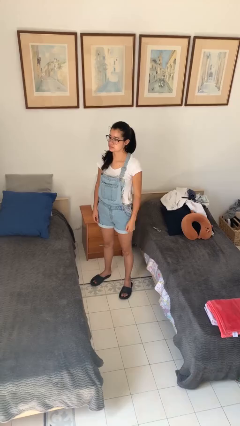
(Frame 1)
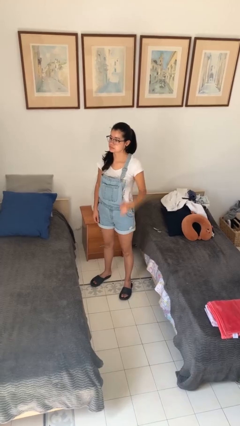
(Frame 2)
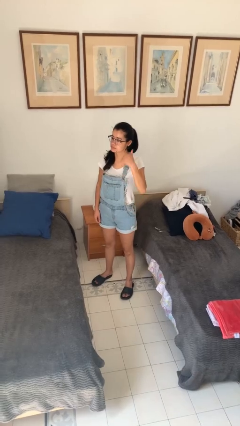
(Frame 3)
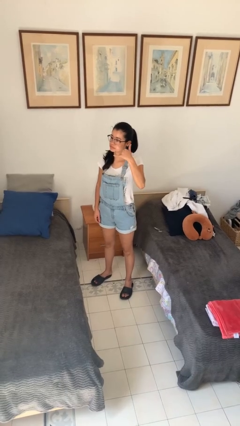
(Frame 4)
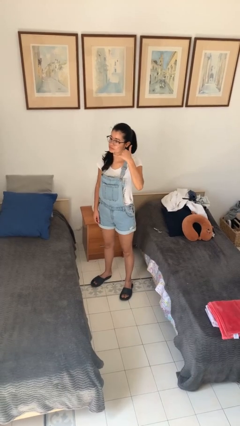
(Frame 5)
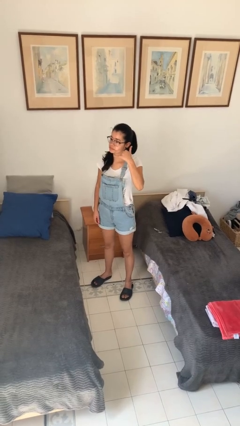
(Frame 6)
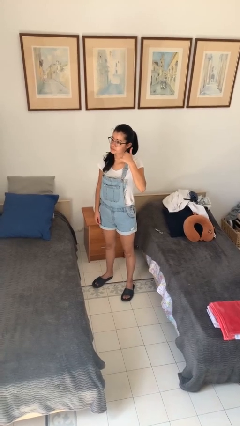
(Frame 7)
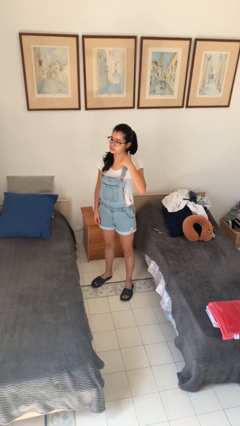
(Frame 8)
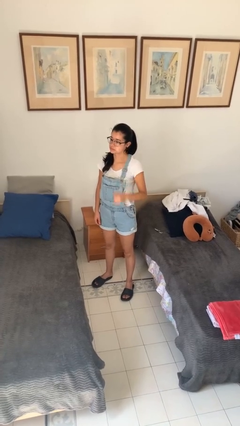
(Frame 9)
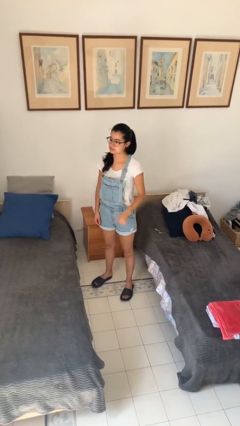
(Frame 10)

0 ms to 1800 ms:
person gestures call me

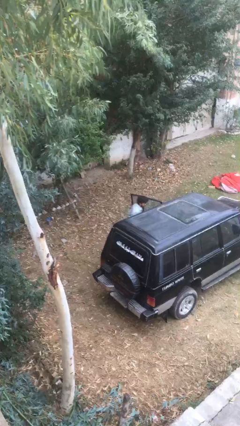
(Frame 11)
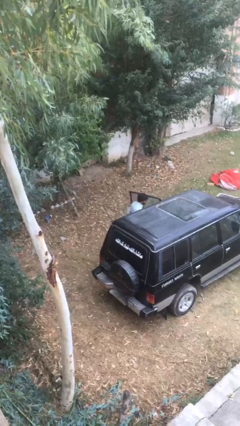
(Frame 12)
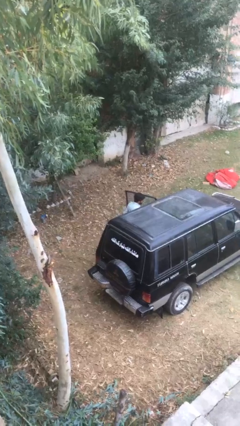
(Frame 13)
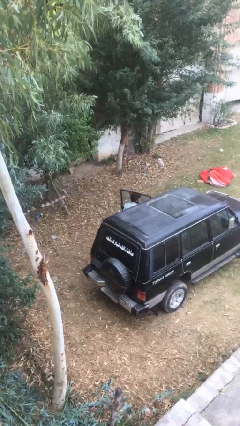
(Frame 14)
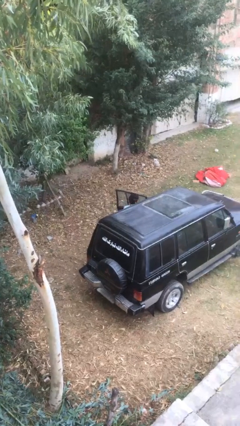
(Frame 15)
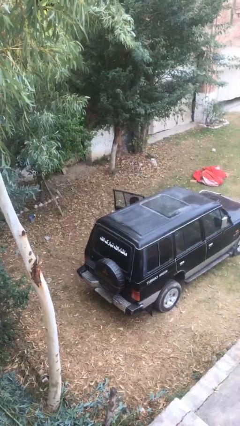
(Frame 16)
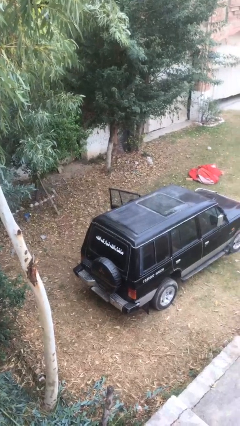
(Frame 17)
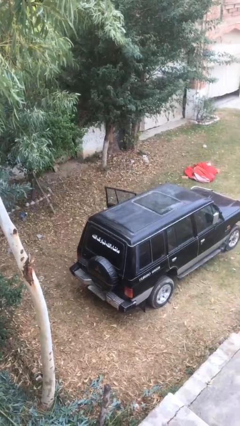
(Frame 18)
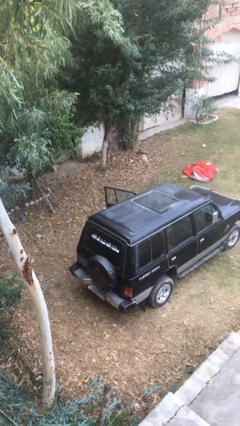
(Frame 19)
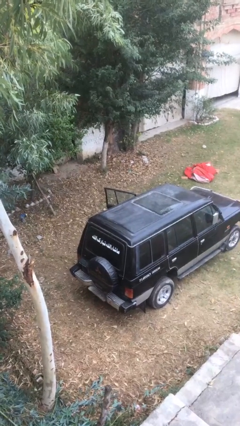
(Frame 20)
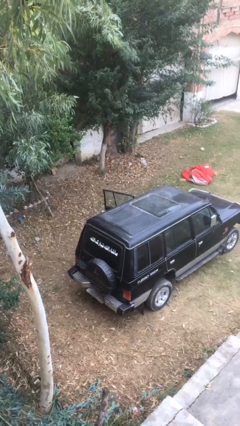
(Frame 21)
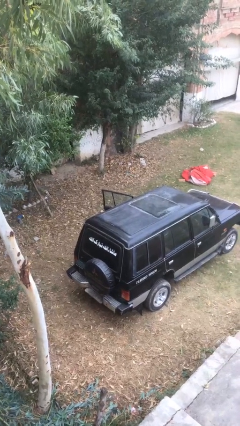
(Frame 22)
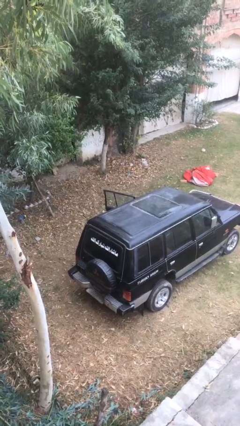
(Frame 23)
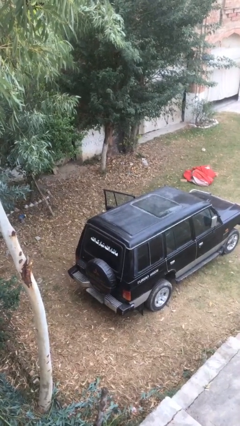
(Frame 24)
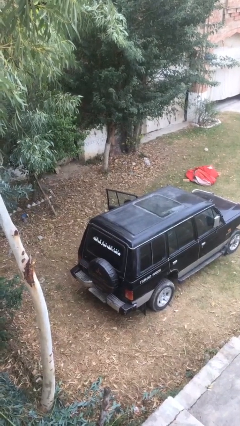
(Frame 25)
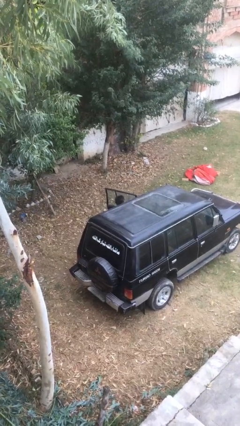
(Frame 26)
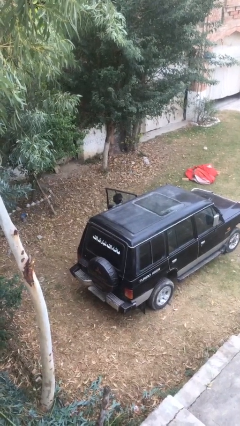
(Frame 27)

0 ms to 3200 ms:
person enters car

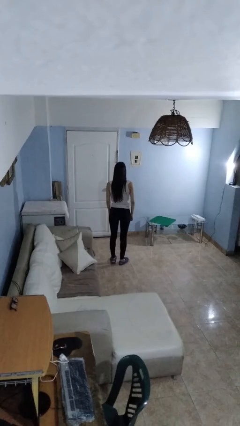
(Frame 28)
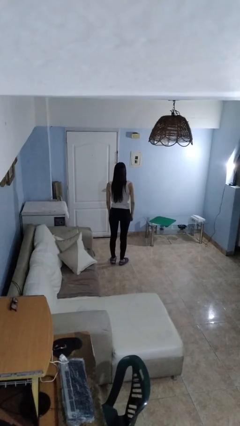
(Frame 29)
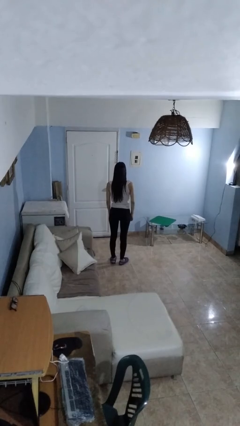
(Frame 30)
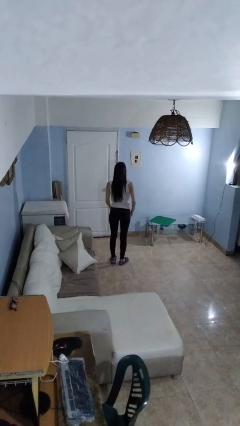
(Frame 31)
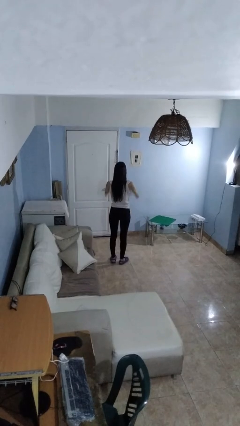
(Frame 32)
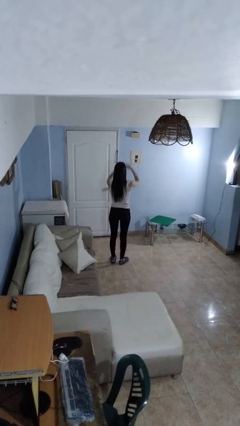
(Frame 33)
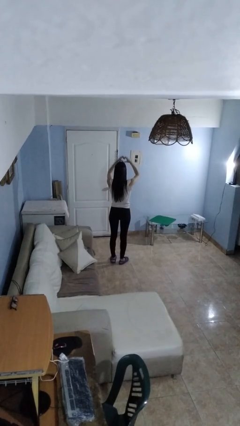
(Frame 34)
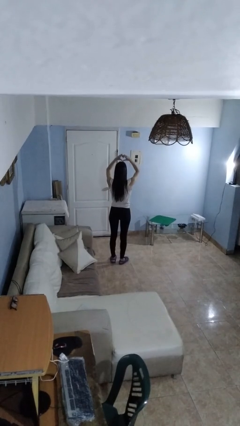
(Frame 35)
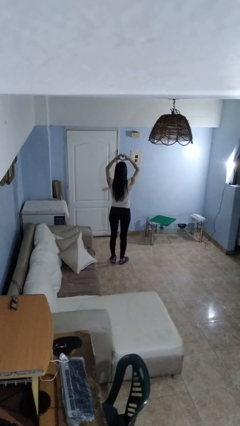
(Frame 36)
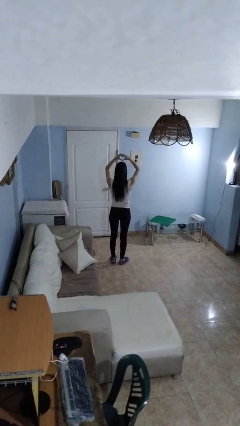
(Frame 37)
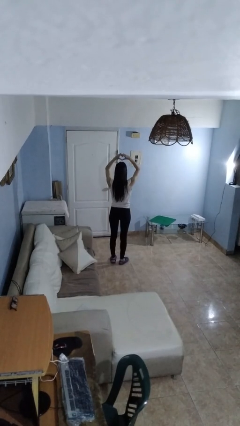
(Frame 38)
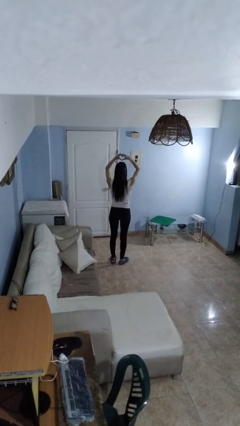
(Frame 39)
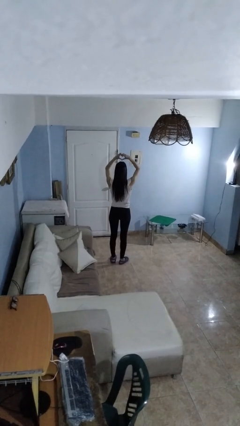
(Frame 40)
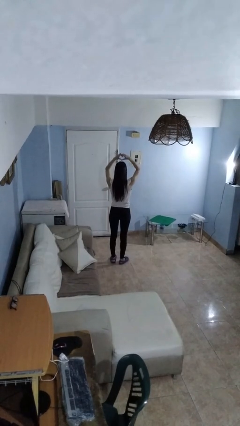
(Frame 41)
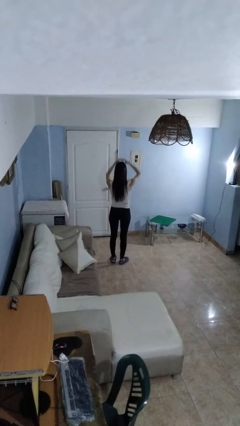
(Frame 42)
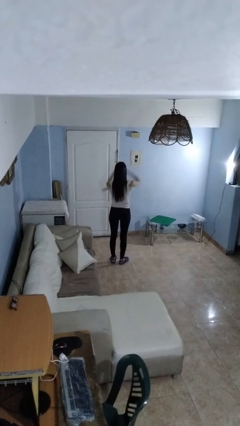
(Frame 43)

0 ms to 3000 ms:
person gestures heart

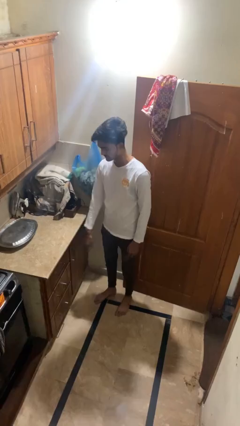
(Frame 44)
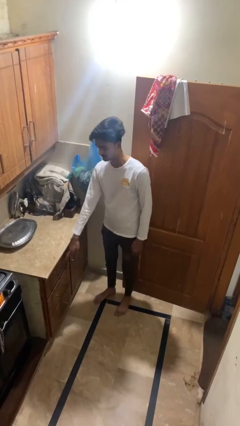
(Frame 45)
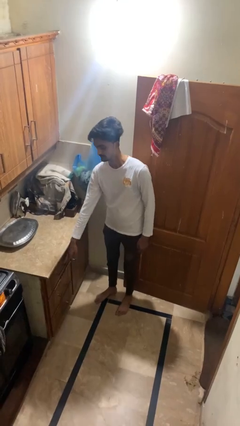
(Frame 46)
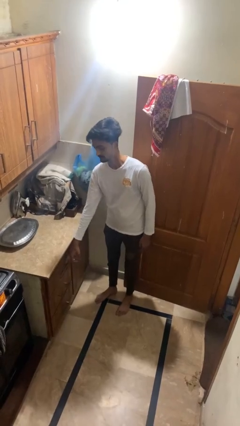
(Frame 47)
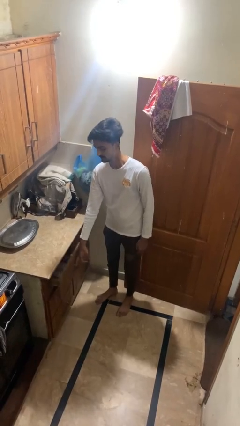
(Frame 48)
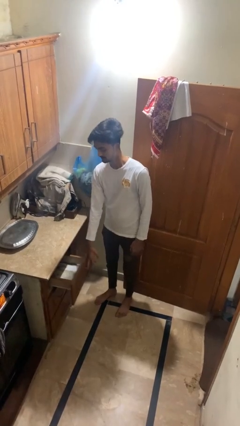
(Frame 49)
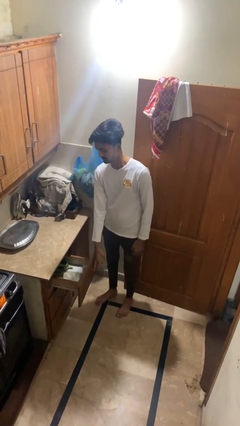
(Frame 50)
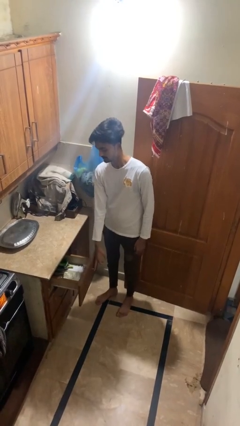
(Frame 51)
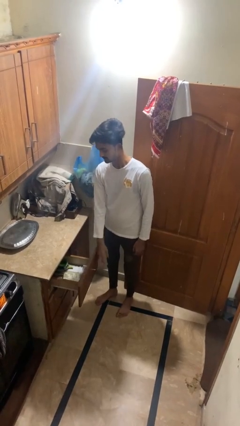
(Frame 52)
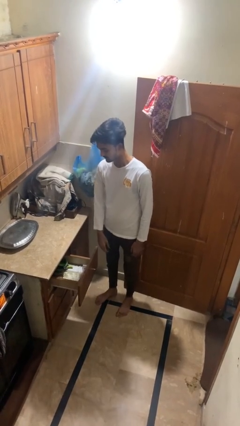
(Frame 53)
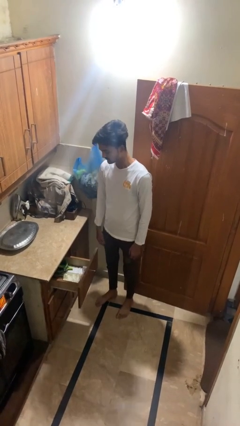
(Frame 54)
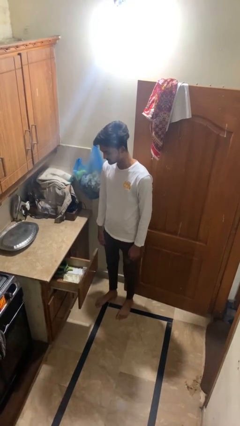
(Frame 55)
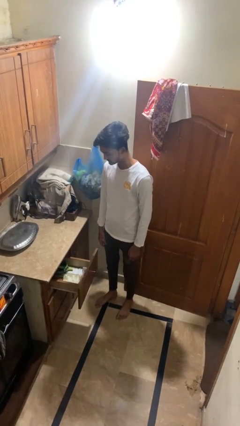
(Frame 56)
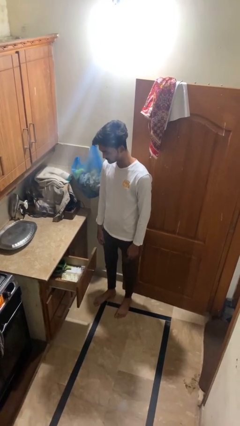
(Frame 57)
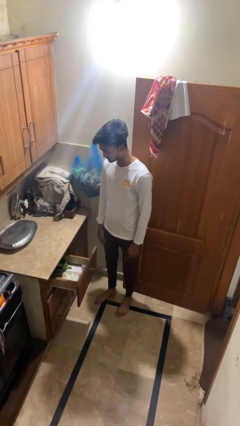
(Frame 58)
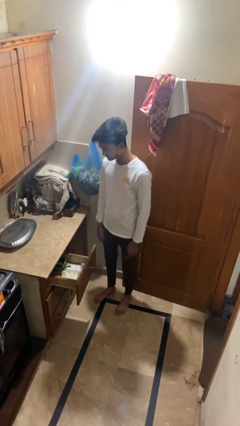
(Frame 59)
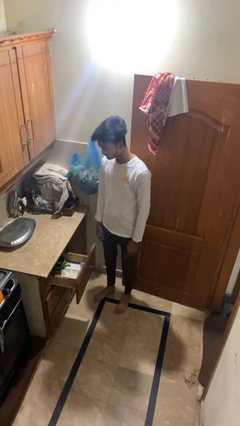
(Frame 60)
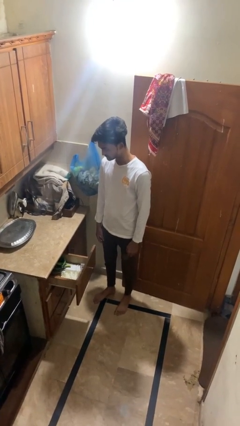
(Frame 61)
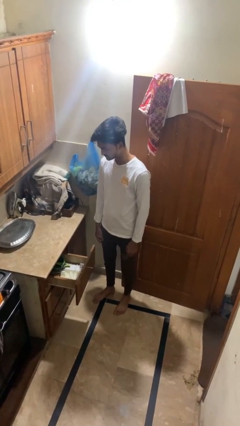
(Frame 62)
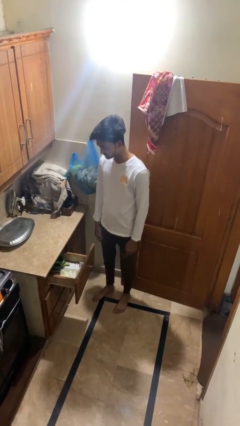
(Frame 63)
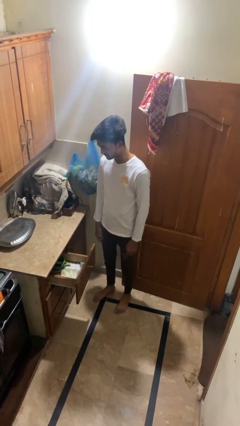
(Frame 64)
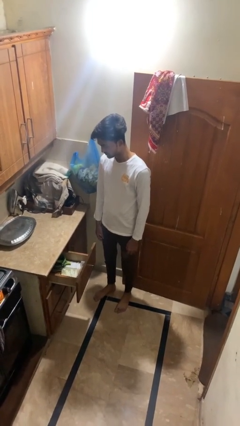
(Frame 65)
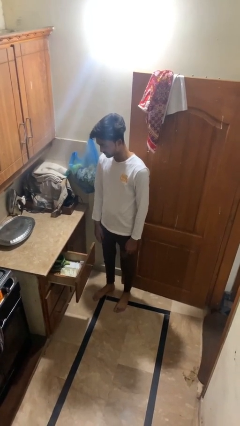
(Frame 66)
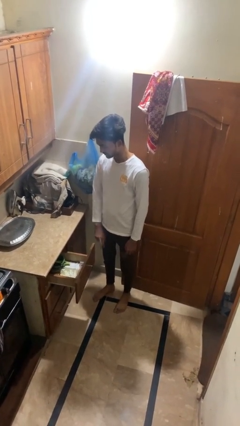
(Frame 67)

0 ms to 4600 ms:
person opens kitchen drawer

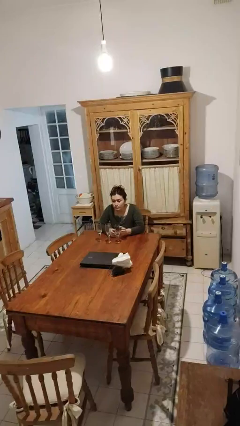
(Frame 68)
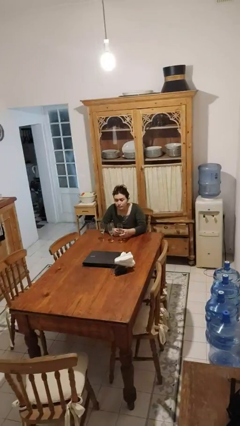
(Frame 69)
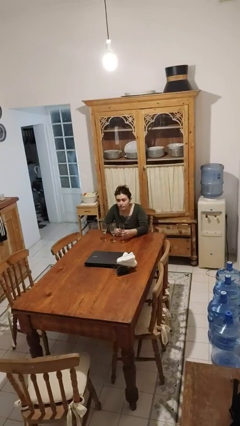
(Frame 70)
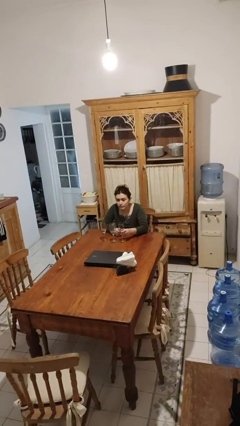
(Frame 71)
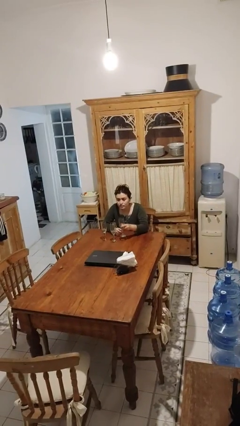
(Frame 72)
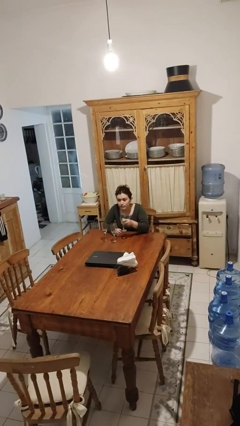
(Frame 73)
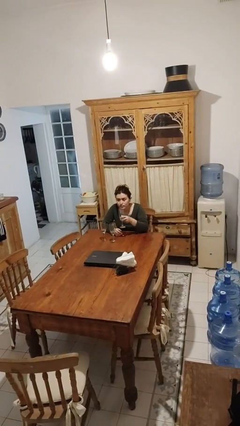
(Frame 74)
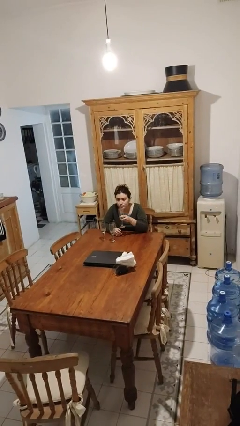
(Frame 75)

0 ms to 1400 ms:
person picks up object from table

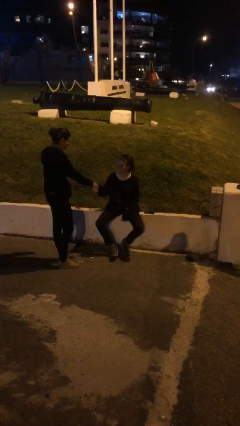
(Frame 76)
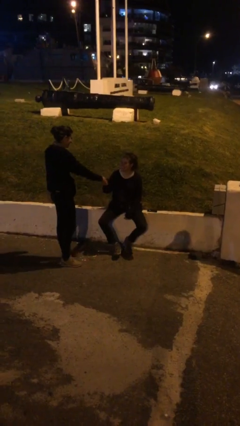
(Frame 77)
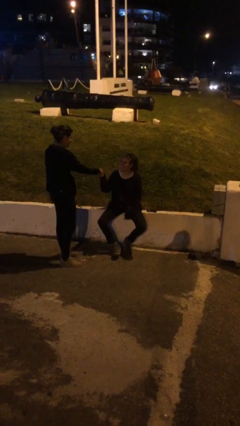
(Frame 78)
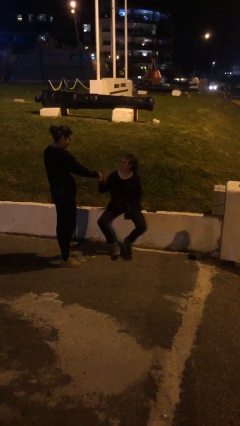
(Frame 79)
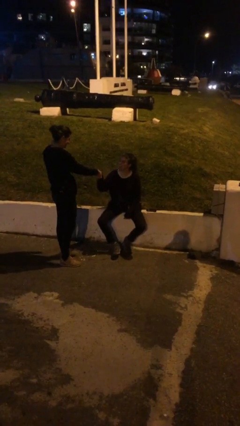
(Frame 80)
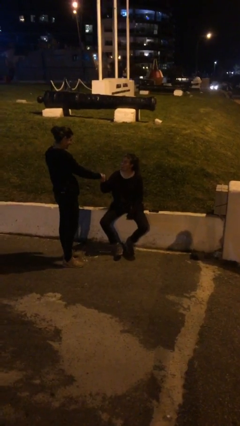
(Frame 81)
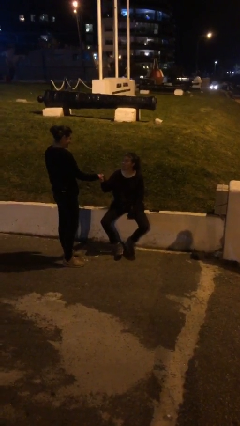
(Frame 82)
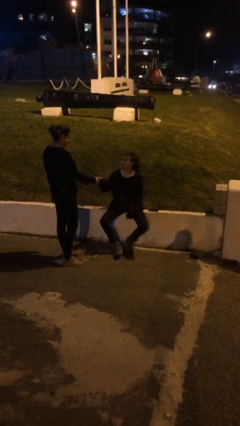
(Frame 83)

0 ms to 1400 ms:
person shakes hand

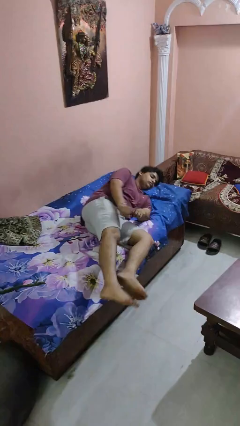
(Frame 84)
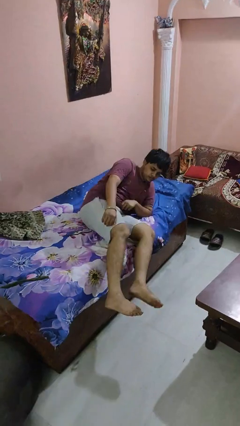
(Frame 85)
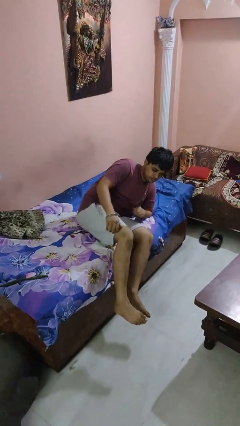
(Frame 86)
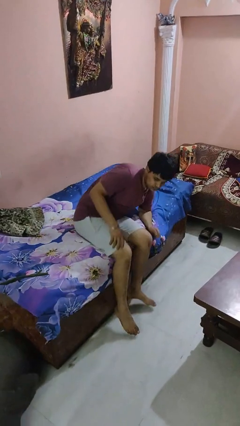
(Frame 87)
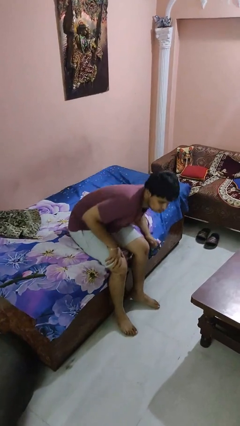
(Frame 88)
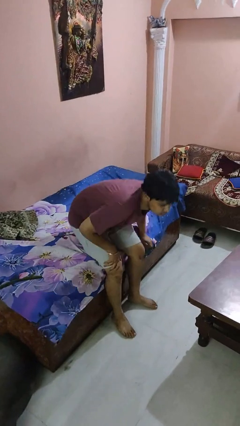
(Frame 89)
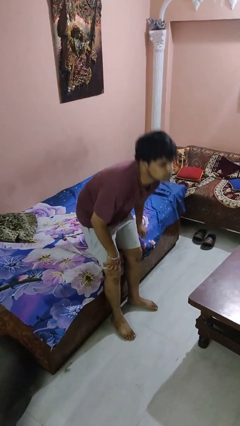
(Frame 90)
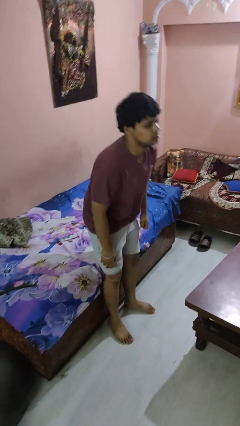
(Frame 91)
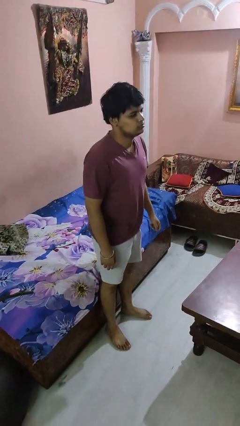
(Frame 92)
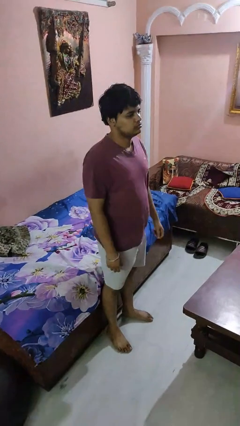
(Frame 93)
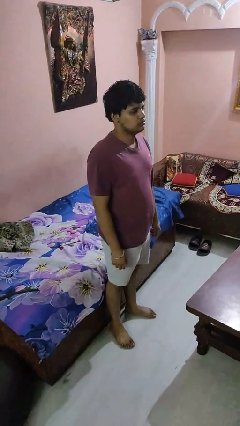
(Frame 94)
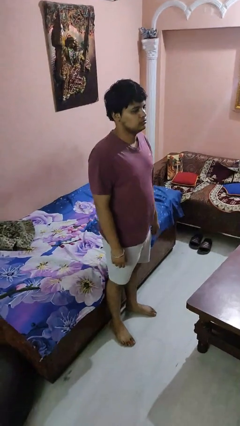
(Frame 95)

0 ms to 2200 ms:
person stands up
